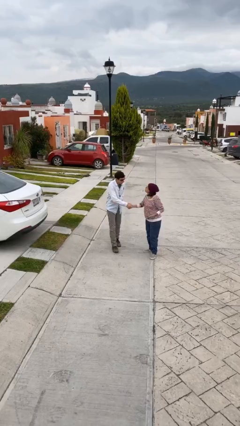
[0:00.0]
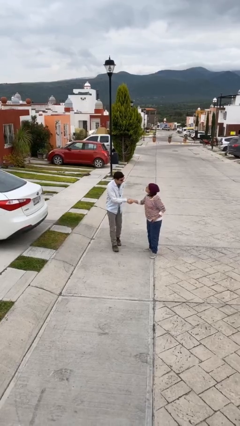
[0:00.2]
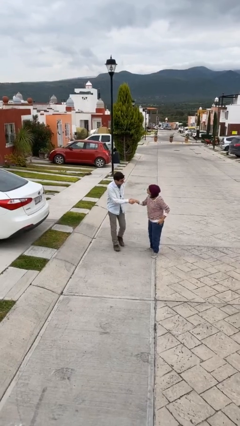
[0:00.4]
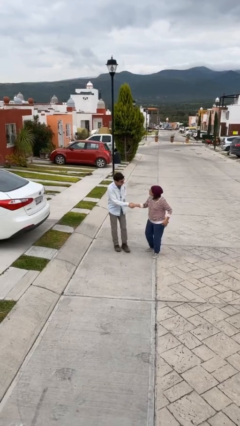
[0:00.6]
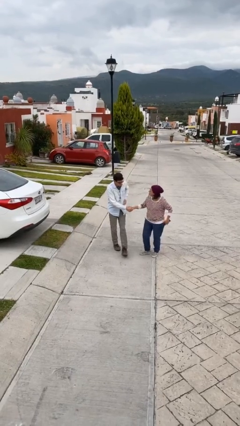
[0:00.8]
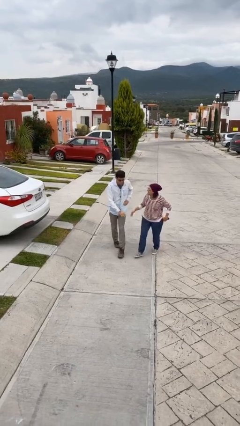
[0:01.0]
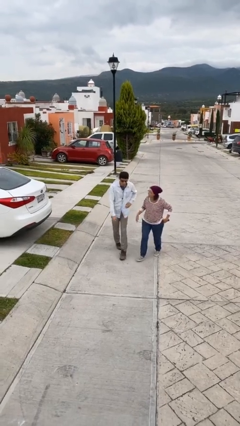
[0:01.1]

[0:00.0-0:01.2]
person shakes hand

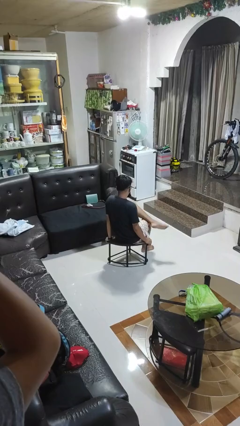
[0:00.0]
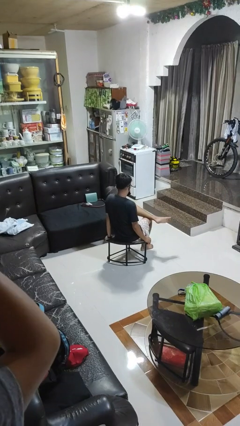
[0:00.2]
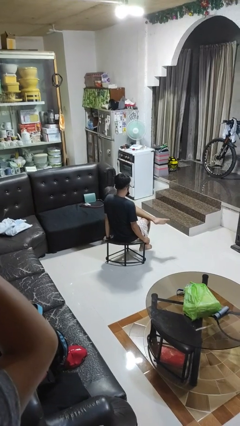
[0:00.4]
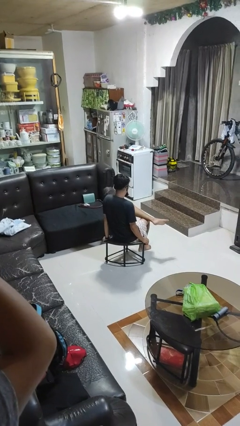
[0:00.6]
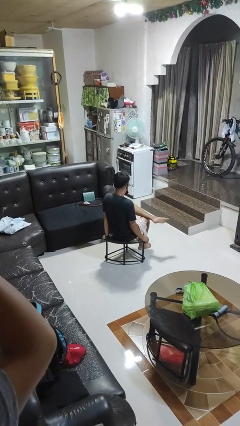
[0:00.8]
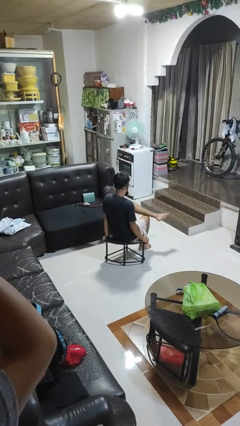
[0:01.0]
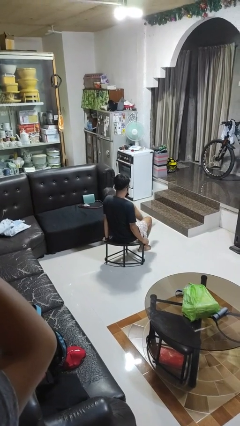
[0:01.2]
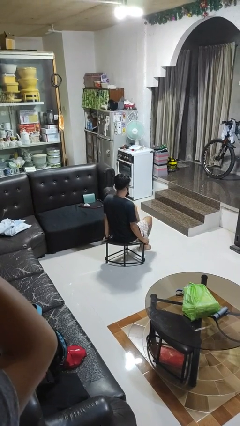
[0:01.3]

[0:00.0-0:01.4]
person crosses legs

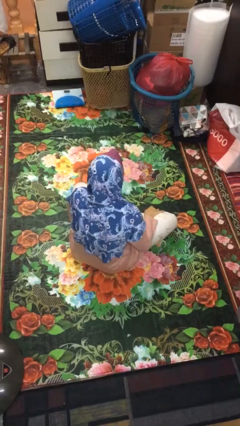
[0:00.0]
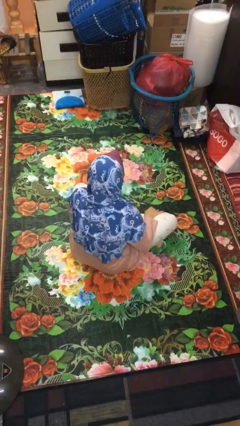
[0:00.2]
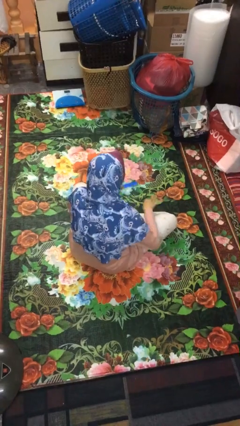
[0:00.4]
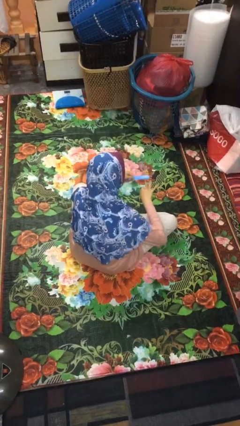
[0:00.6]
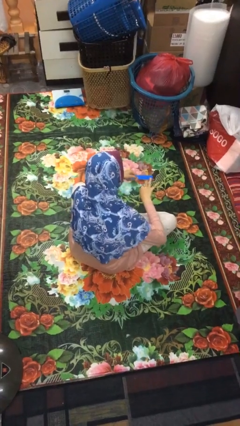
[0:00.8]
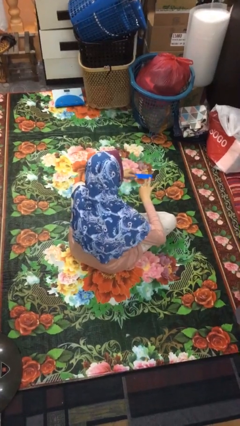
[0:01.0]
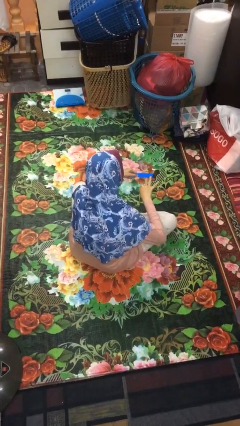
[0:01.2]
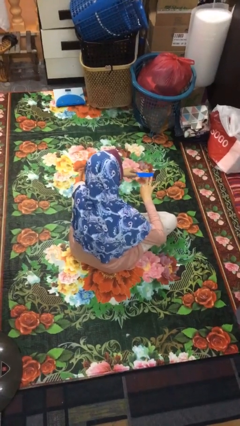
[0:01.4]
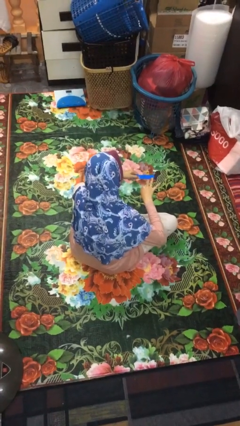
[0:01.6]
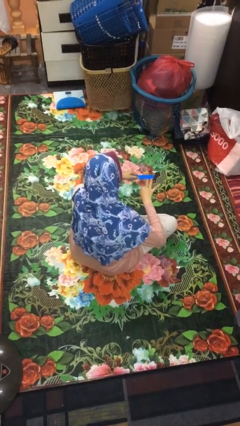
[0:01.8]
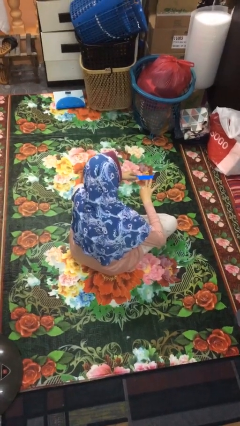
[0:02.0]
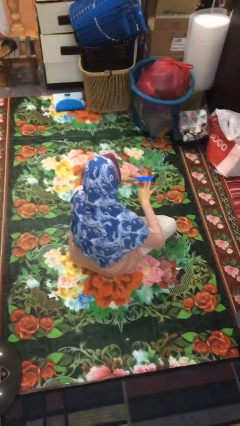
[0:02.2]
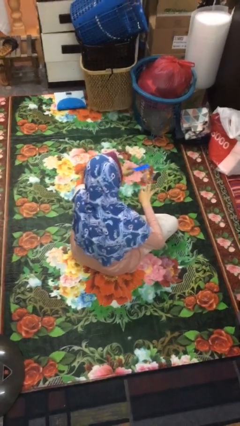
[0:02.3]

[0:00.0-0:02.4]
person files fingernails

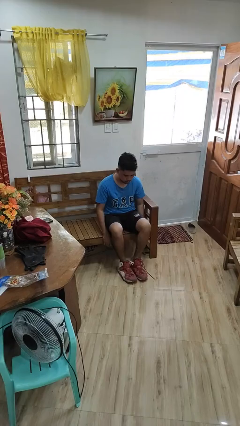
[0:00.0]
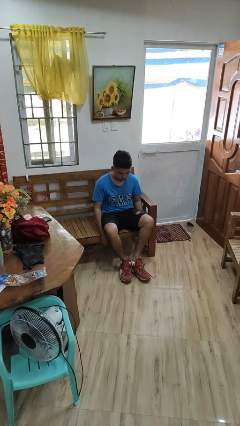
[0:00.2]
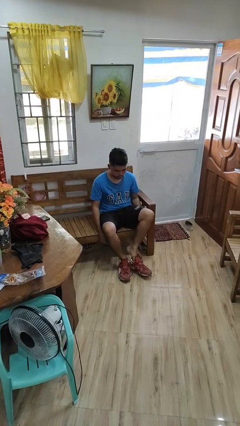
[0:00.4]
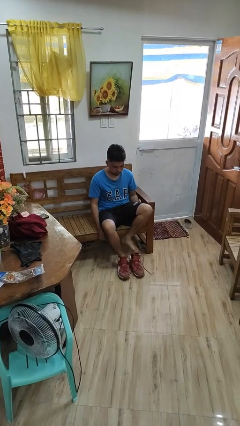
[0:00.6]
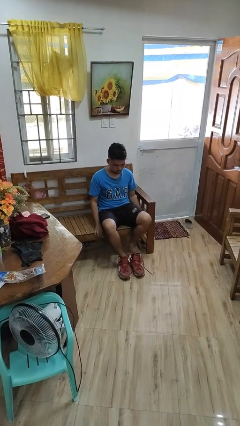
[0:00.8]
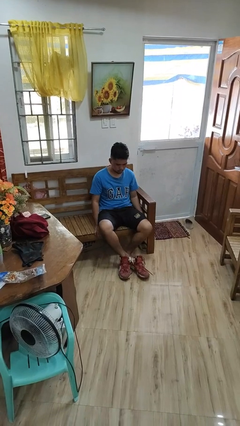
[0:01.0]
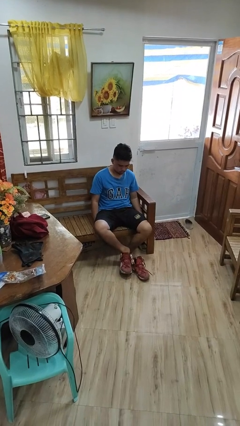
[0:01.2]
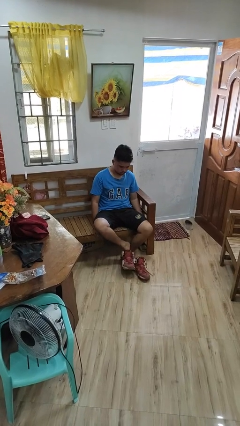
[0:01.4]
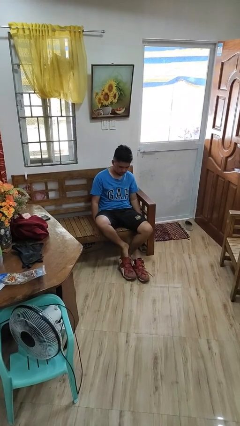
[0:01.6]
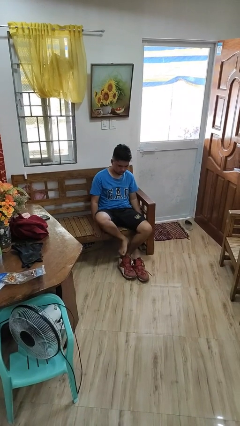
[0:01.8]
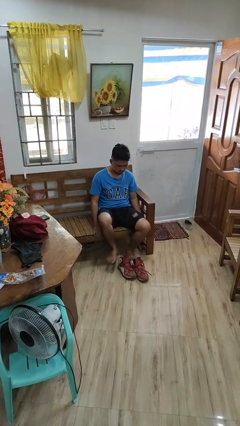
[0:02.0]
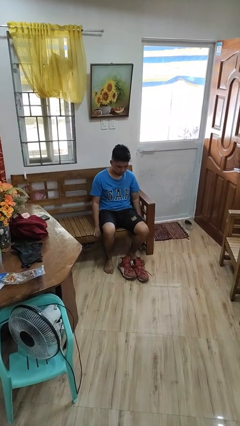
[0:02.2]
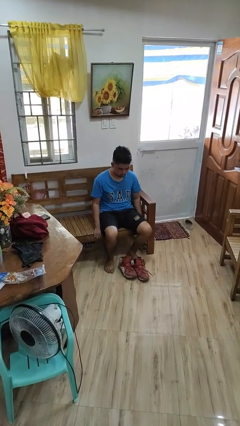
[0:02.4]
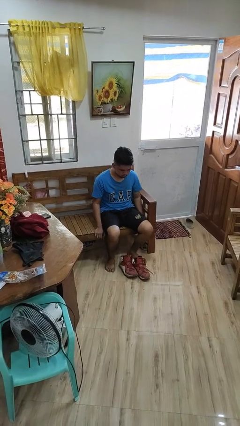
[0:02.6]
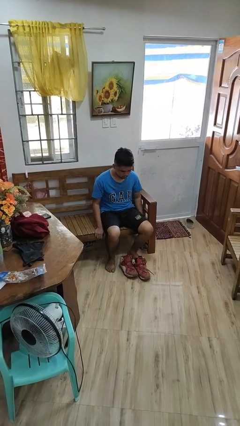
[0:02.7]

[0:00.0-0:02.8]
person takes off shoes

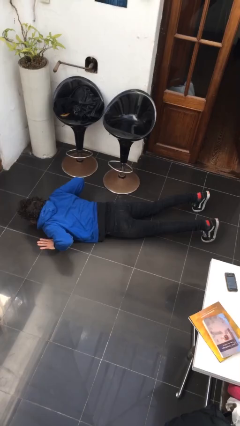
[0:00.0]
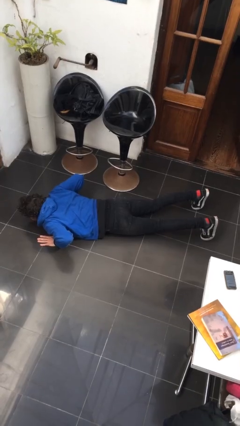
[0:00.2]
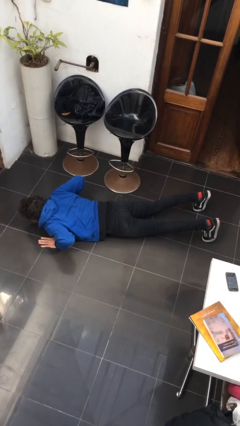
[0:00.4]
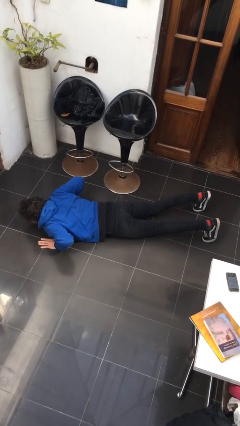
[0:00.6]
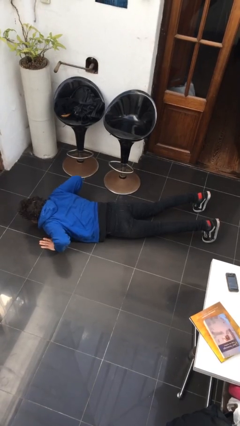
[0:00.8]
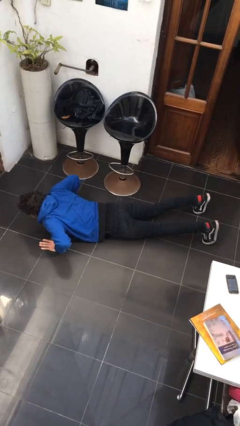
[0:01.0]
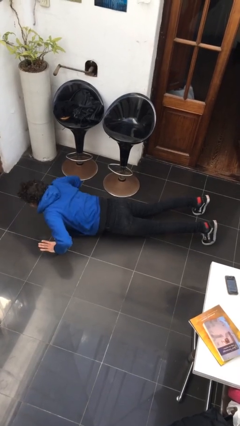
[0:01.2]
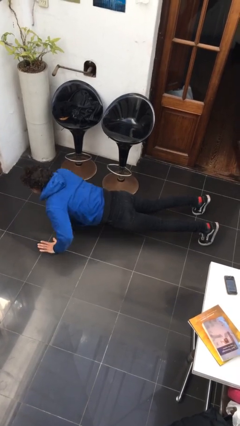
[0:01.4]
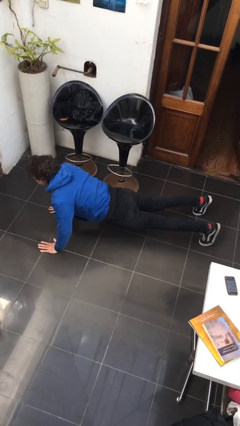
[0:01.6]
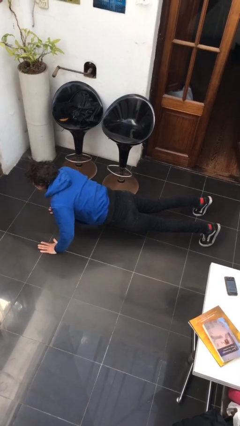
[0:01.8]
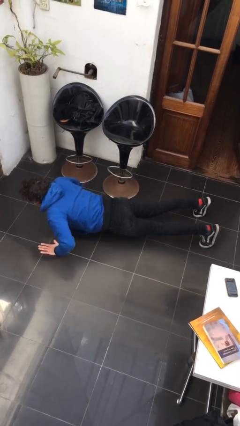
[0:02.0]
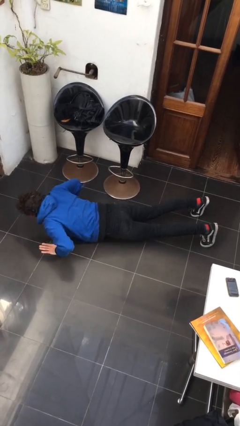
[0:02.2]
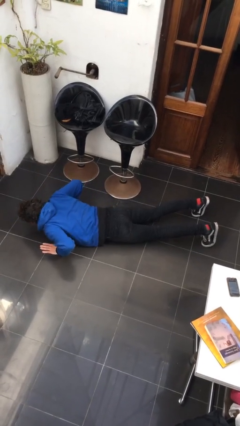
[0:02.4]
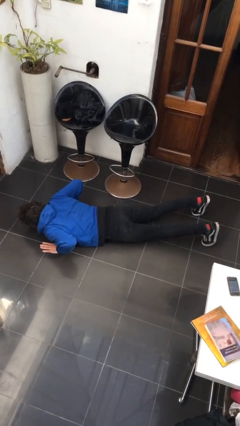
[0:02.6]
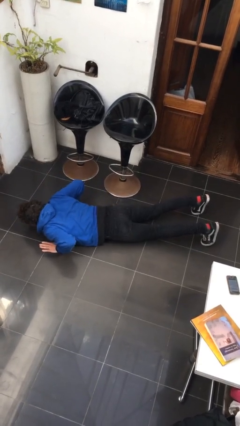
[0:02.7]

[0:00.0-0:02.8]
person exercises with pushup

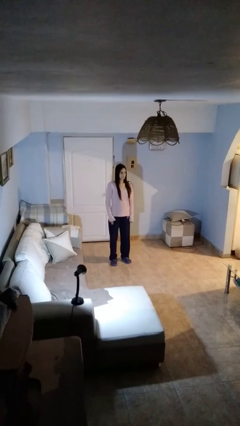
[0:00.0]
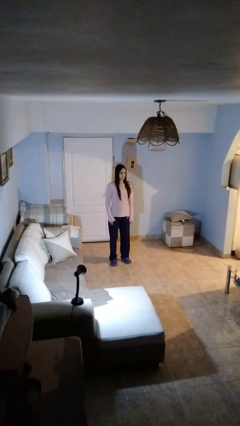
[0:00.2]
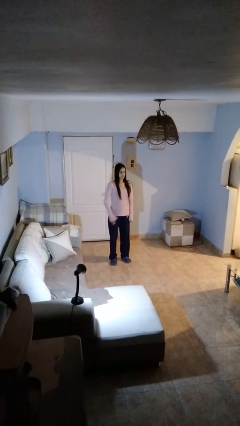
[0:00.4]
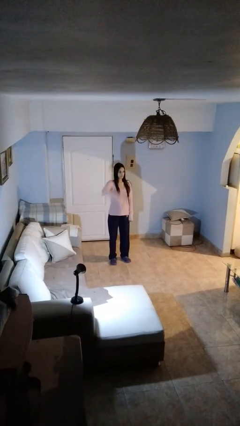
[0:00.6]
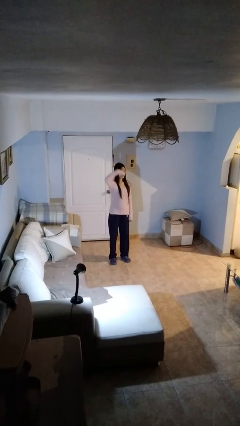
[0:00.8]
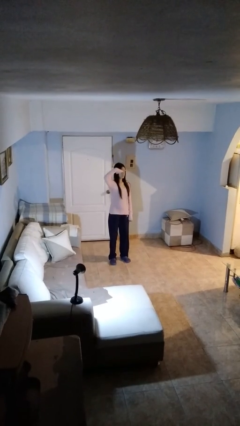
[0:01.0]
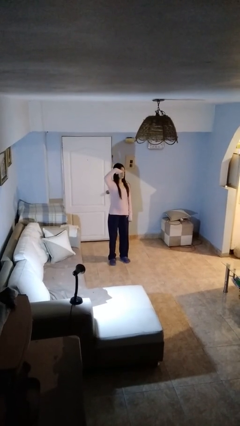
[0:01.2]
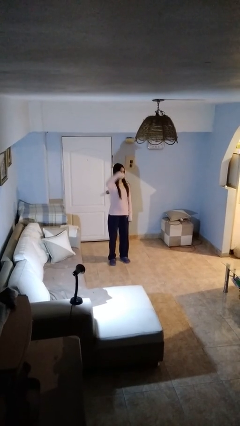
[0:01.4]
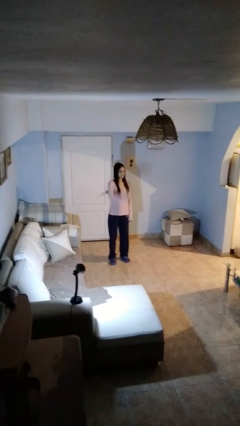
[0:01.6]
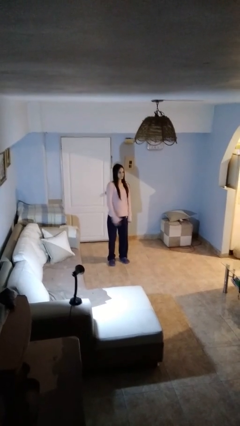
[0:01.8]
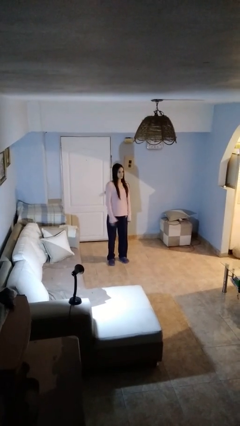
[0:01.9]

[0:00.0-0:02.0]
person salutes

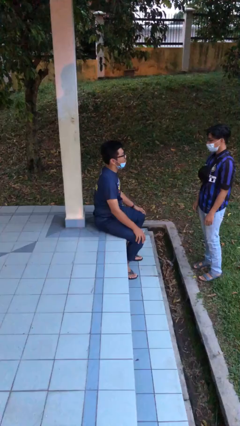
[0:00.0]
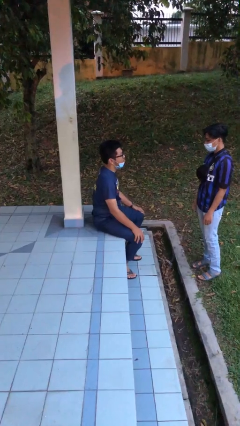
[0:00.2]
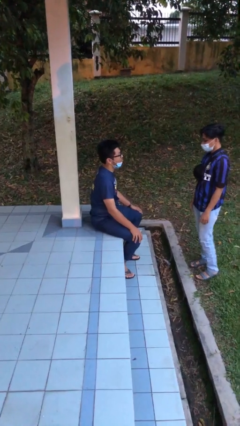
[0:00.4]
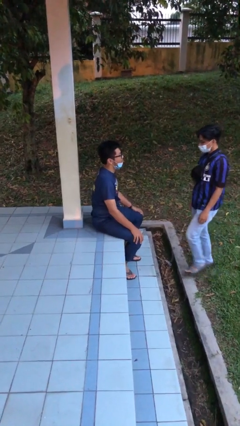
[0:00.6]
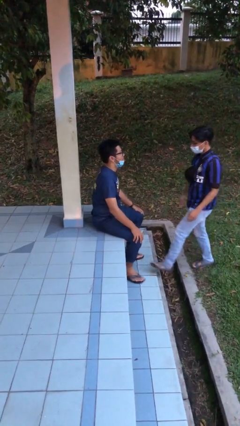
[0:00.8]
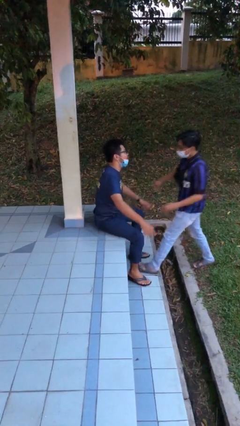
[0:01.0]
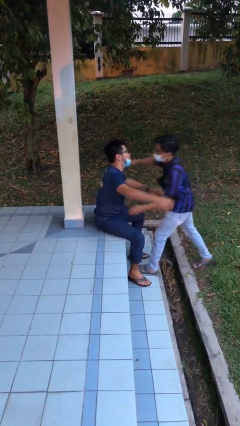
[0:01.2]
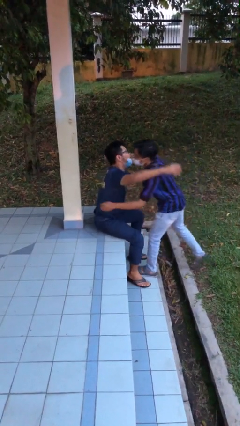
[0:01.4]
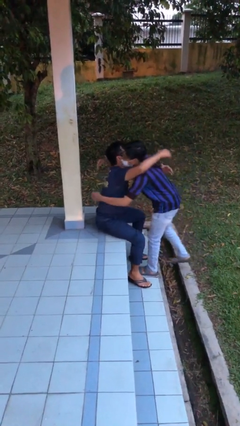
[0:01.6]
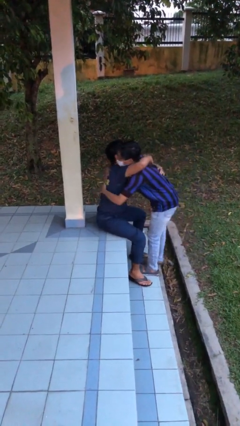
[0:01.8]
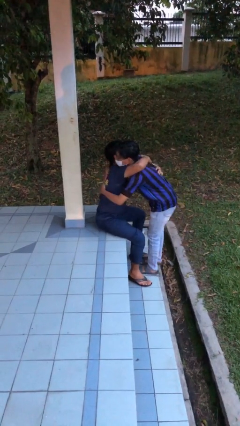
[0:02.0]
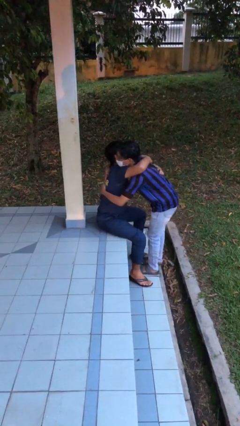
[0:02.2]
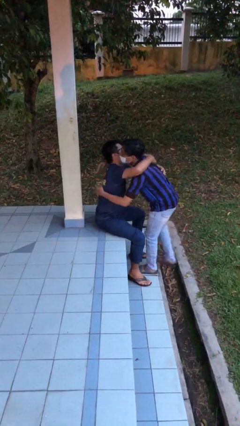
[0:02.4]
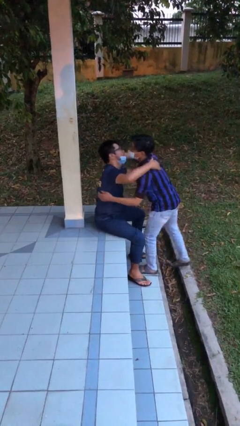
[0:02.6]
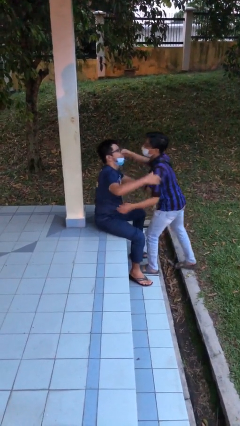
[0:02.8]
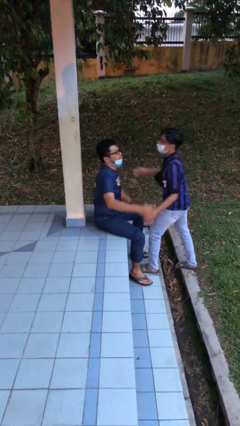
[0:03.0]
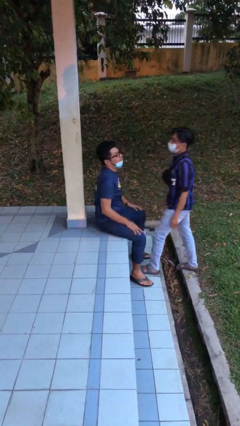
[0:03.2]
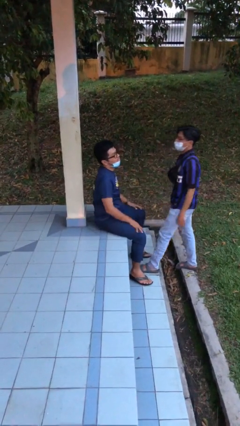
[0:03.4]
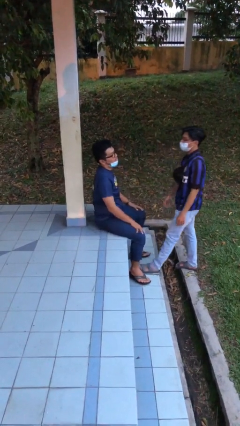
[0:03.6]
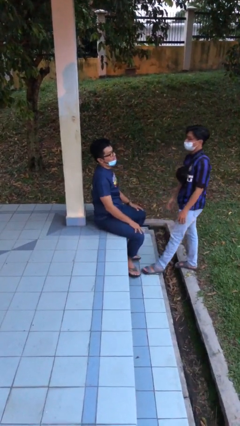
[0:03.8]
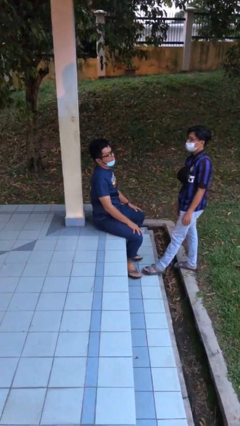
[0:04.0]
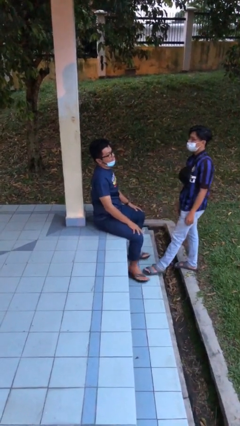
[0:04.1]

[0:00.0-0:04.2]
person embraces person

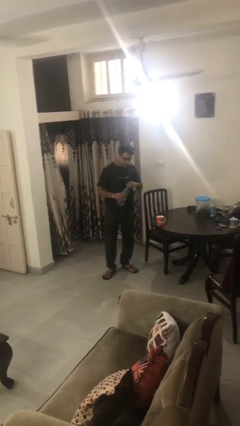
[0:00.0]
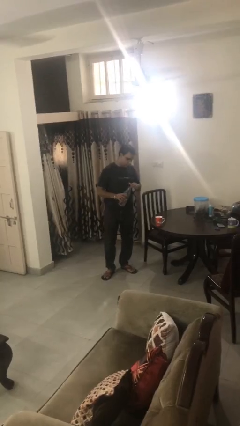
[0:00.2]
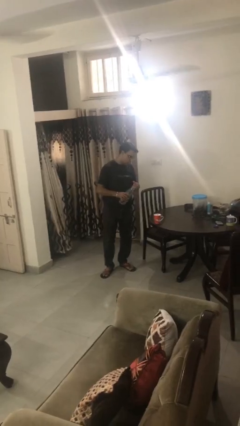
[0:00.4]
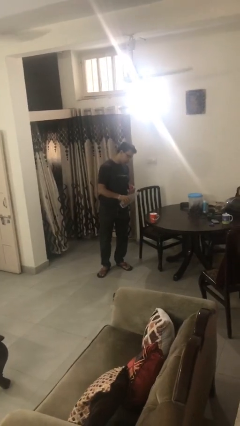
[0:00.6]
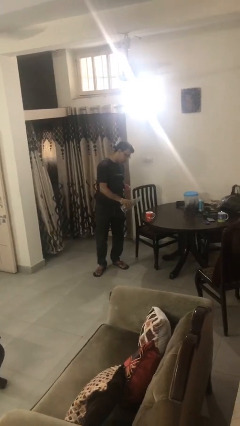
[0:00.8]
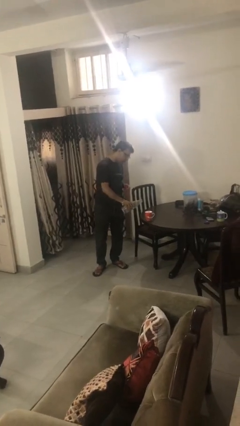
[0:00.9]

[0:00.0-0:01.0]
person unscrews lid from bottle
